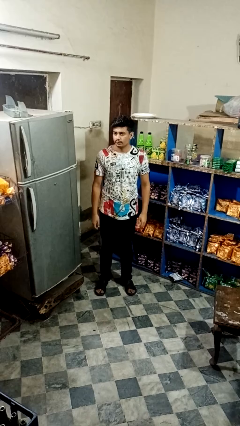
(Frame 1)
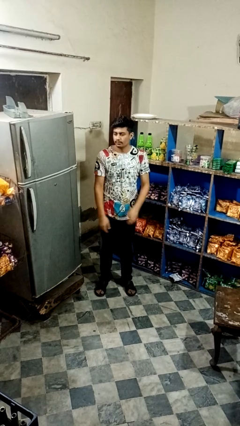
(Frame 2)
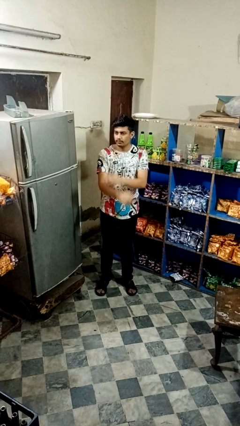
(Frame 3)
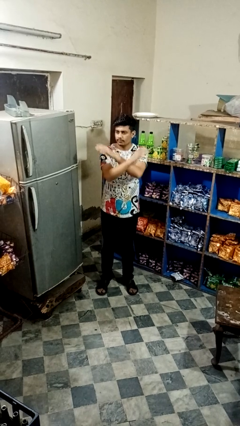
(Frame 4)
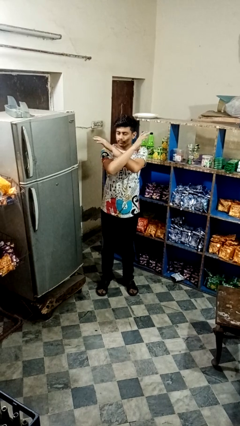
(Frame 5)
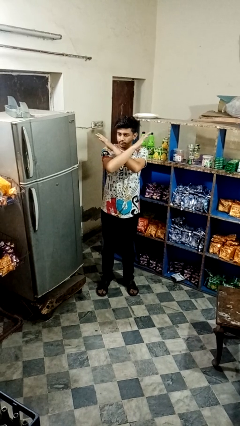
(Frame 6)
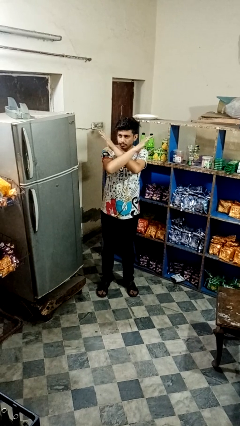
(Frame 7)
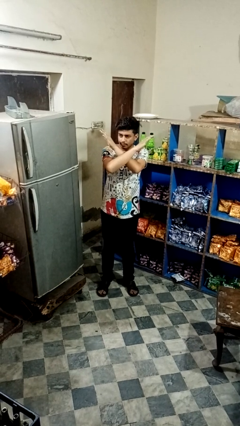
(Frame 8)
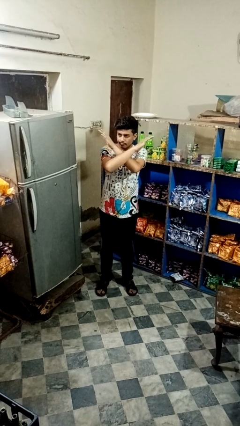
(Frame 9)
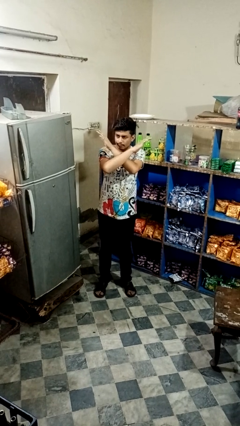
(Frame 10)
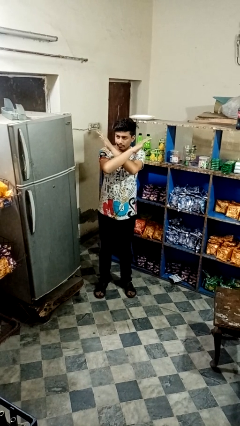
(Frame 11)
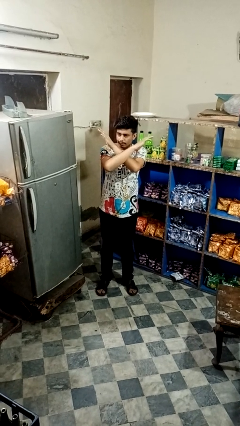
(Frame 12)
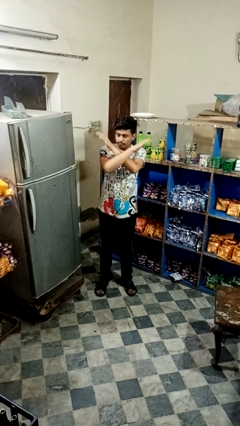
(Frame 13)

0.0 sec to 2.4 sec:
person gestures arms x

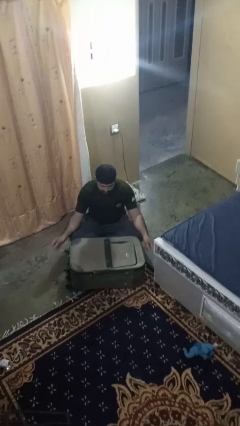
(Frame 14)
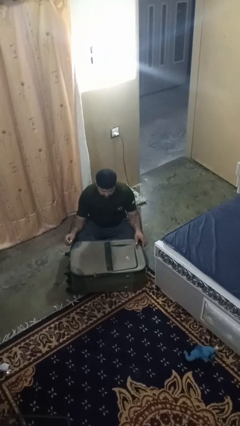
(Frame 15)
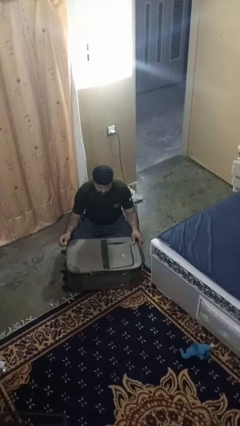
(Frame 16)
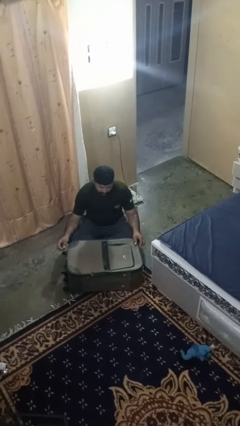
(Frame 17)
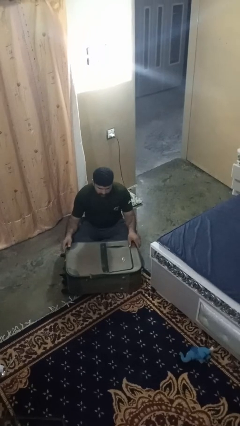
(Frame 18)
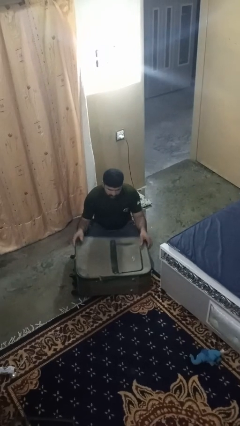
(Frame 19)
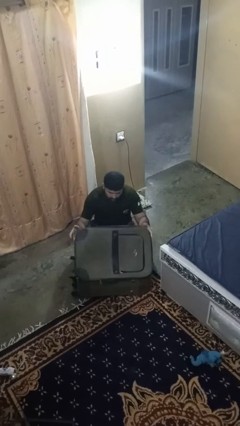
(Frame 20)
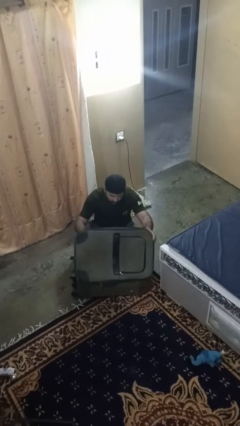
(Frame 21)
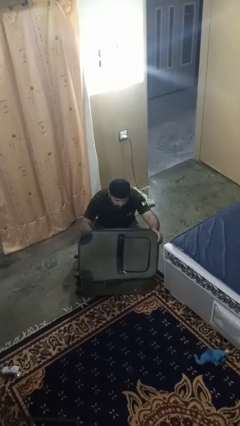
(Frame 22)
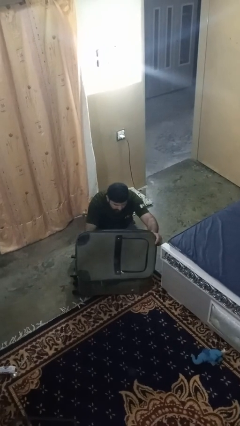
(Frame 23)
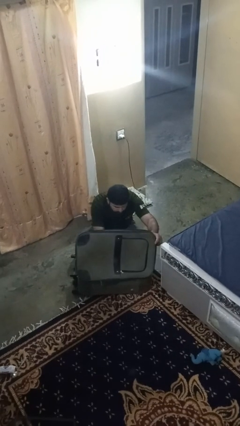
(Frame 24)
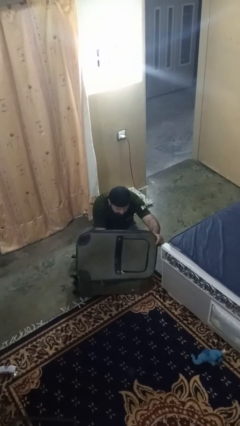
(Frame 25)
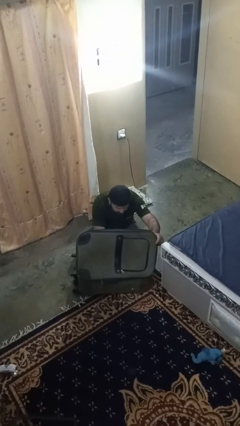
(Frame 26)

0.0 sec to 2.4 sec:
person searches in bag

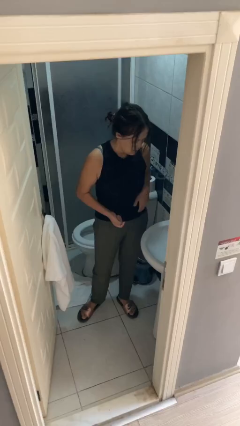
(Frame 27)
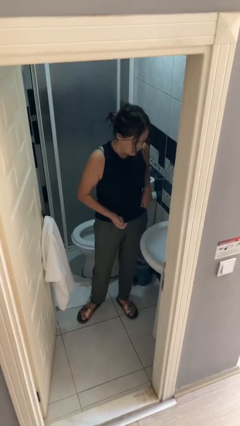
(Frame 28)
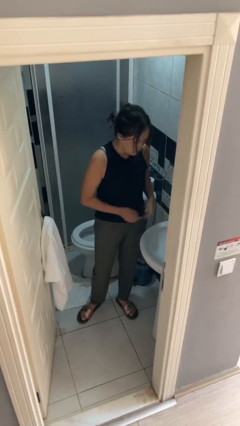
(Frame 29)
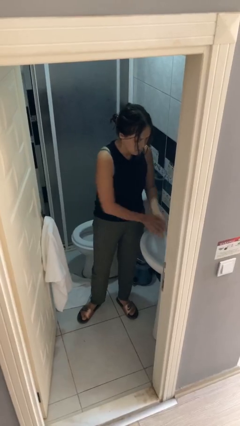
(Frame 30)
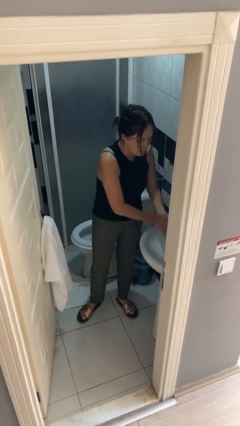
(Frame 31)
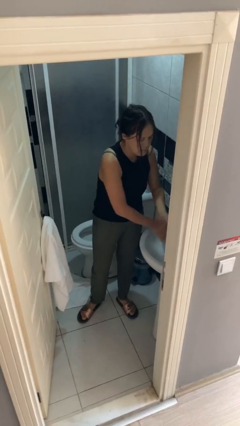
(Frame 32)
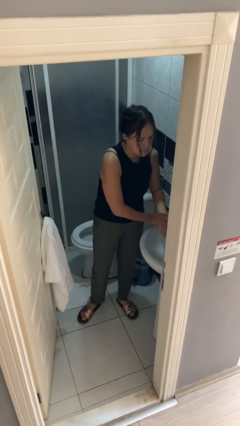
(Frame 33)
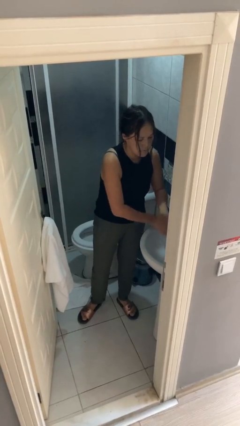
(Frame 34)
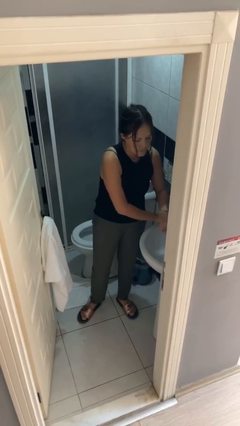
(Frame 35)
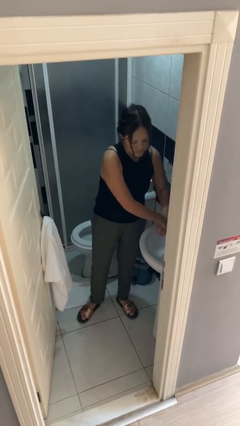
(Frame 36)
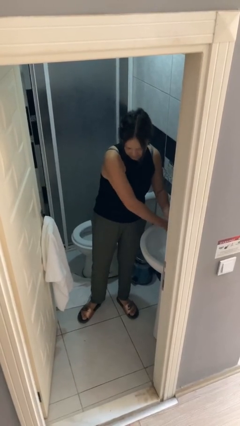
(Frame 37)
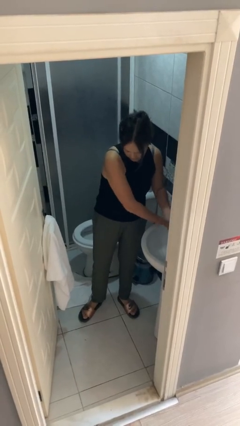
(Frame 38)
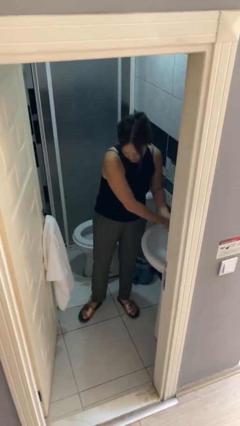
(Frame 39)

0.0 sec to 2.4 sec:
person washes hands

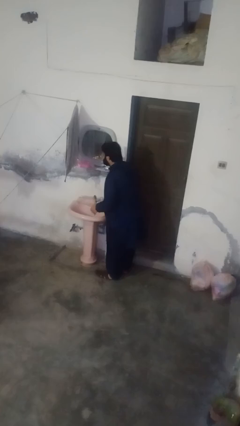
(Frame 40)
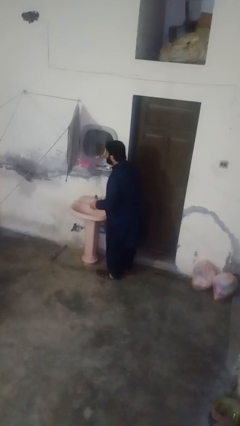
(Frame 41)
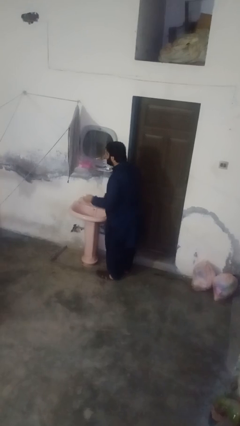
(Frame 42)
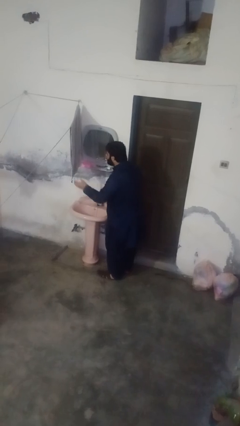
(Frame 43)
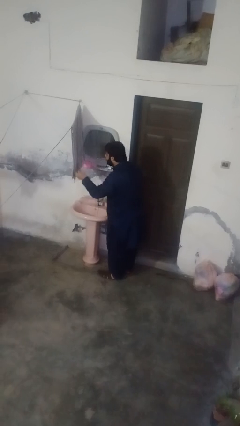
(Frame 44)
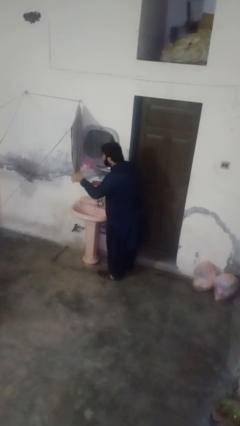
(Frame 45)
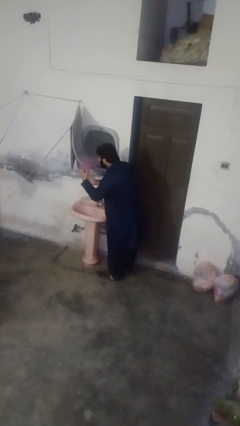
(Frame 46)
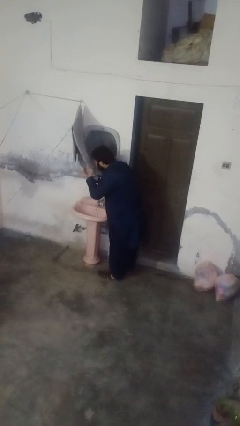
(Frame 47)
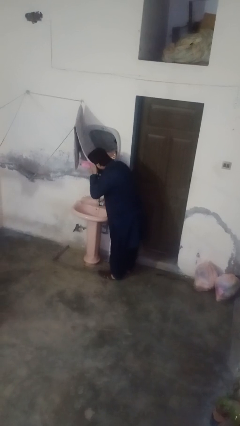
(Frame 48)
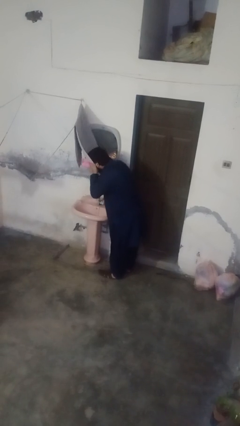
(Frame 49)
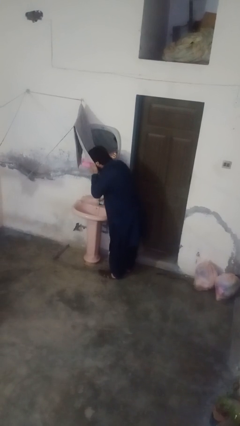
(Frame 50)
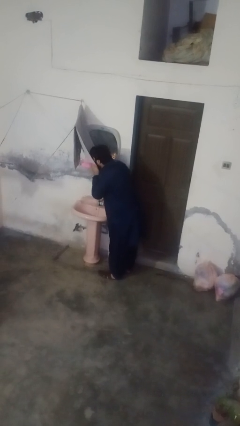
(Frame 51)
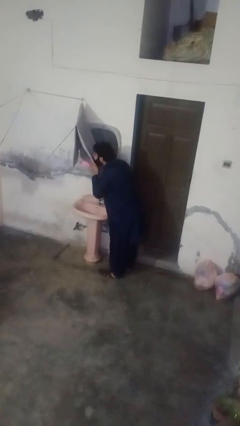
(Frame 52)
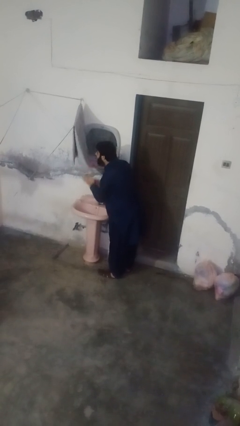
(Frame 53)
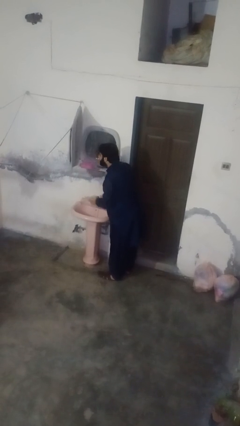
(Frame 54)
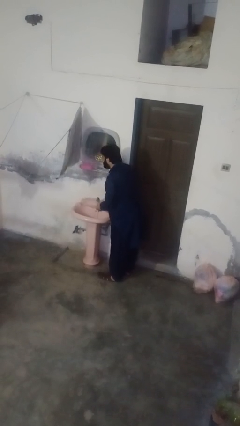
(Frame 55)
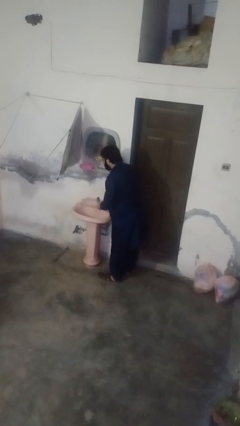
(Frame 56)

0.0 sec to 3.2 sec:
person dries face with towel

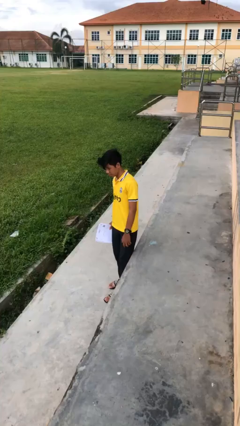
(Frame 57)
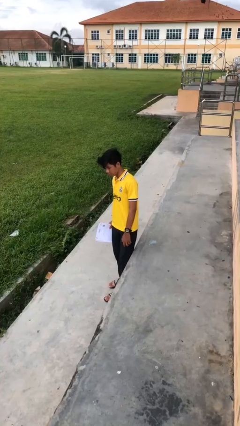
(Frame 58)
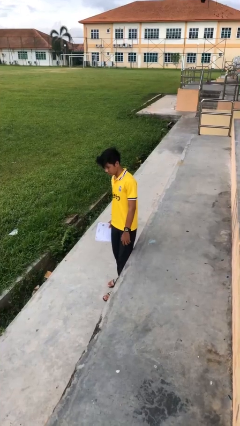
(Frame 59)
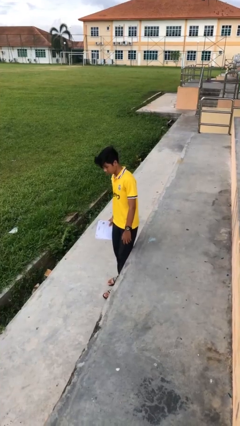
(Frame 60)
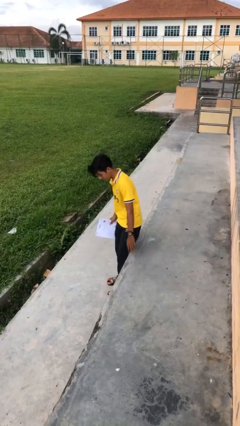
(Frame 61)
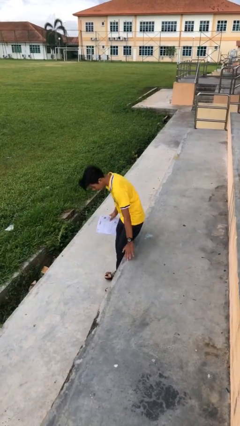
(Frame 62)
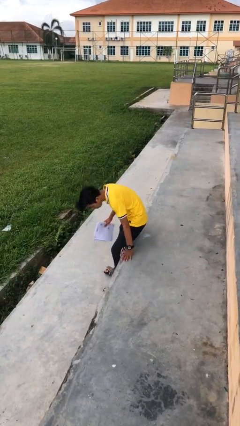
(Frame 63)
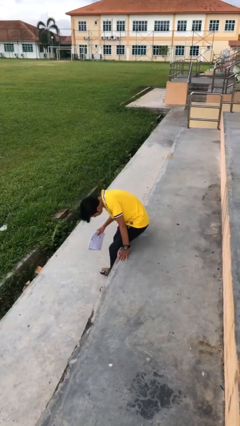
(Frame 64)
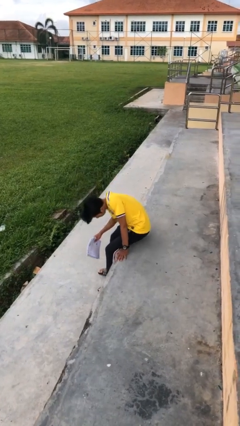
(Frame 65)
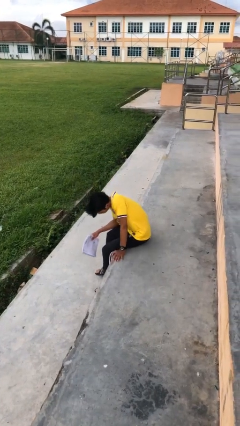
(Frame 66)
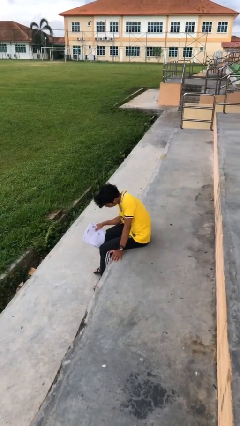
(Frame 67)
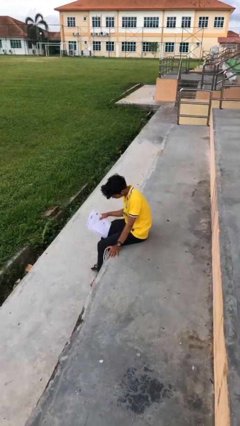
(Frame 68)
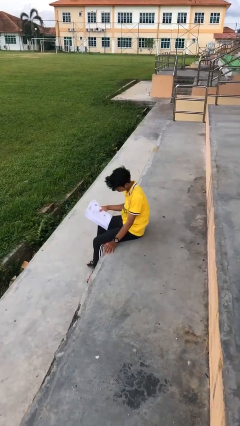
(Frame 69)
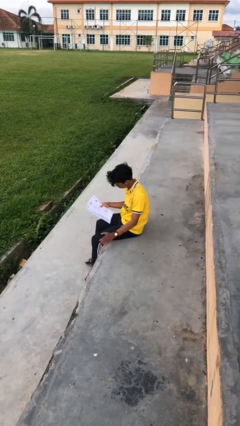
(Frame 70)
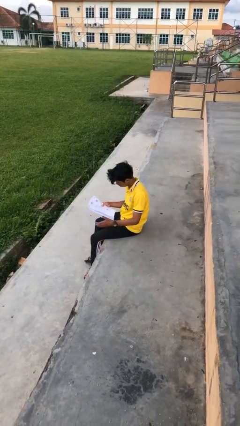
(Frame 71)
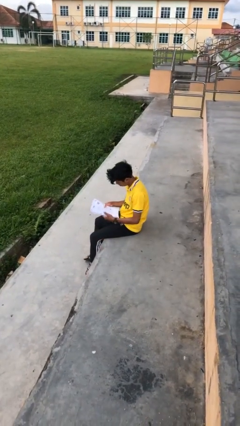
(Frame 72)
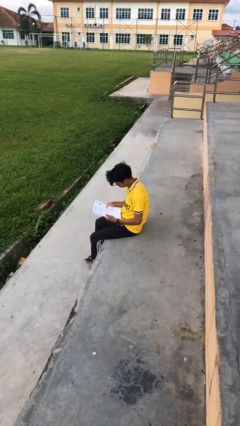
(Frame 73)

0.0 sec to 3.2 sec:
person sits down

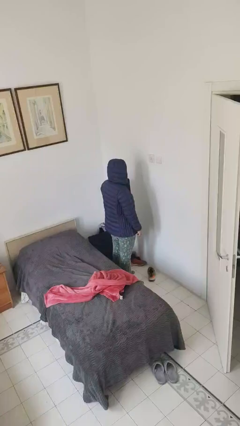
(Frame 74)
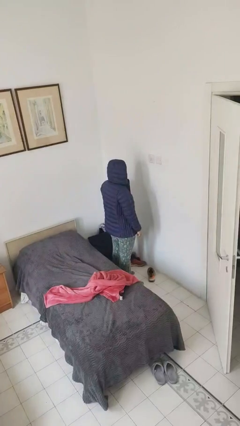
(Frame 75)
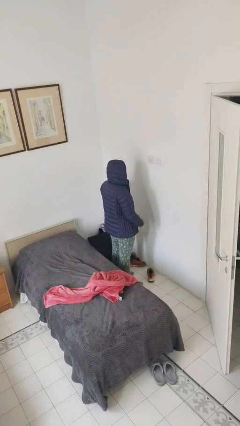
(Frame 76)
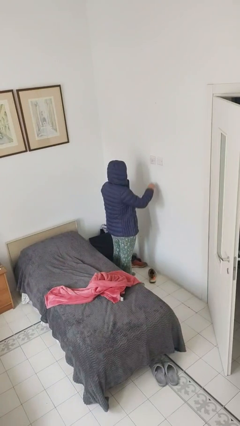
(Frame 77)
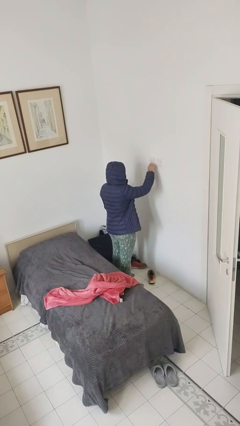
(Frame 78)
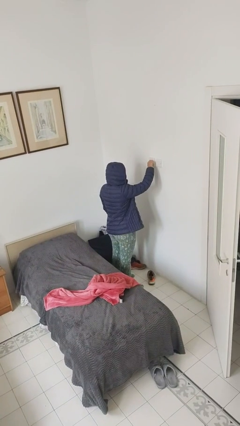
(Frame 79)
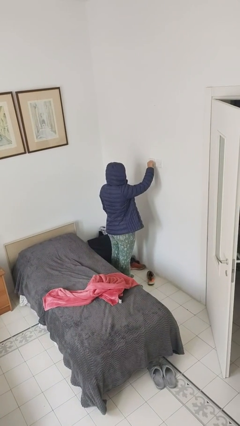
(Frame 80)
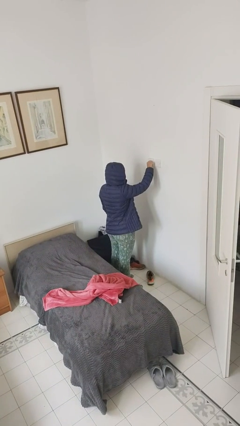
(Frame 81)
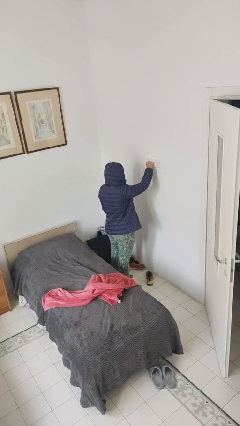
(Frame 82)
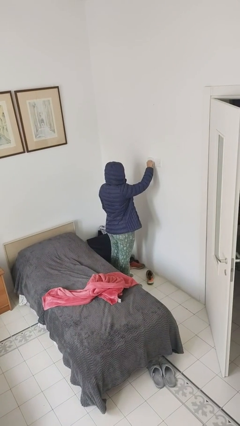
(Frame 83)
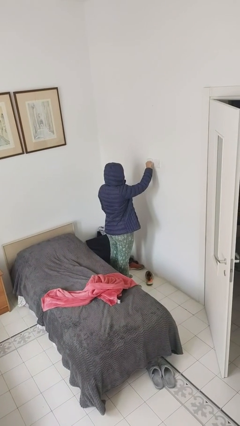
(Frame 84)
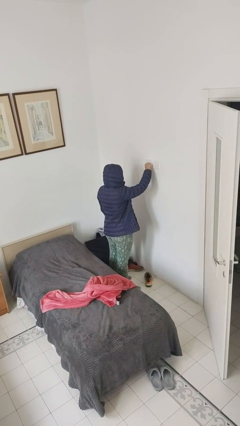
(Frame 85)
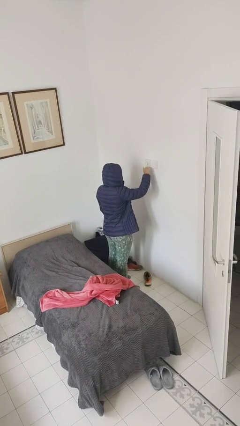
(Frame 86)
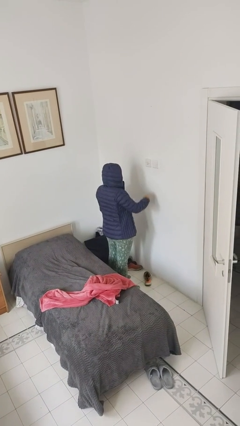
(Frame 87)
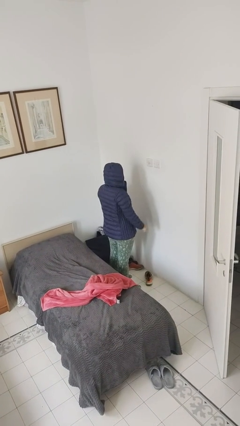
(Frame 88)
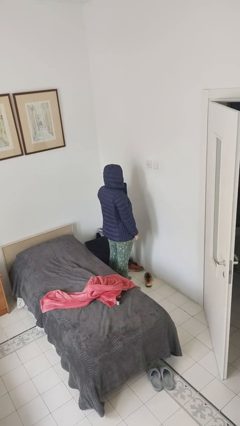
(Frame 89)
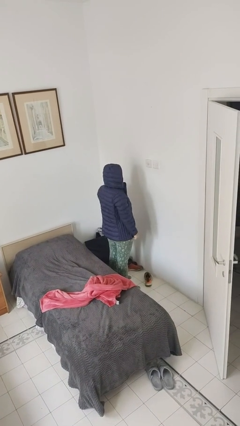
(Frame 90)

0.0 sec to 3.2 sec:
person turns on fan

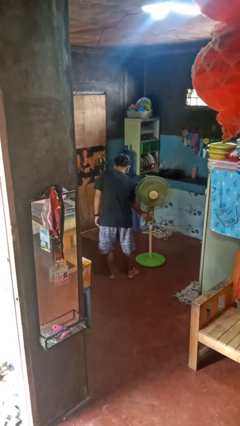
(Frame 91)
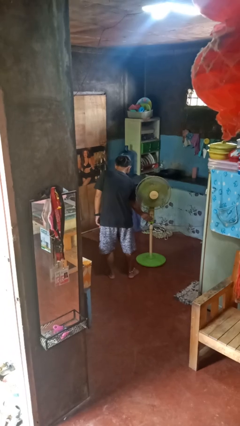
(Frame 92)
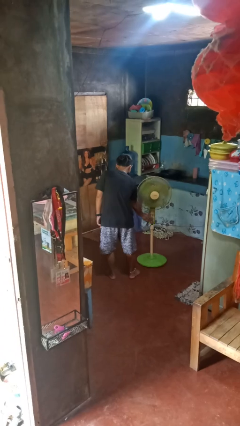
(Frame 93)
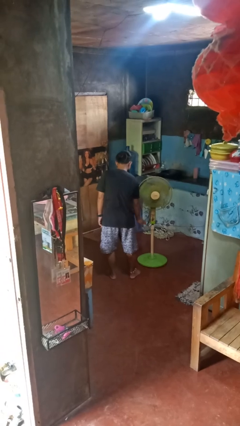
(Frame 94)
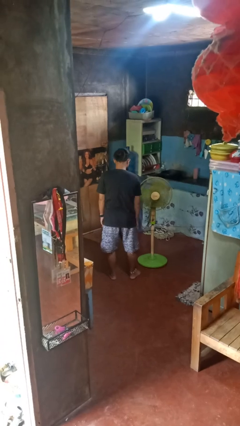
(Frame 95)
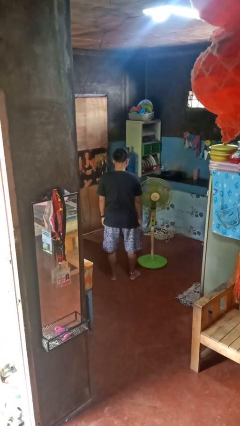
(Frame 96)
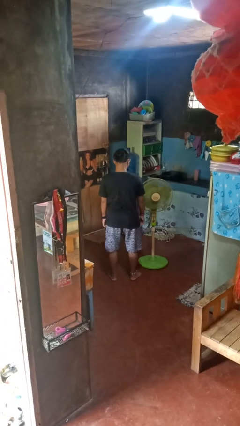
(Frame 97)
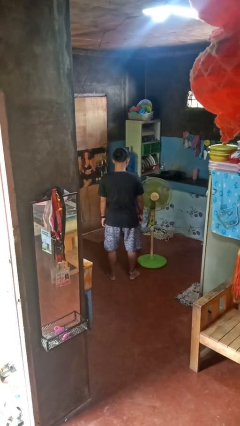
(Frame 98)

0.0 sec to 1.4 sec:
person turns off fan
